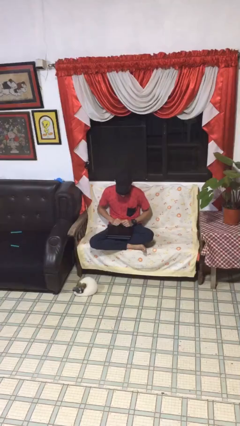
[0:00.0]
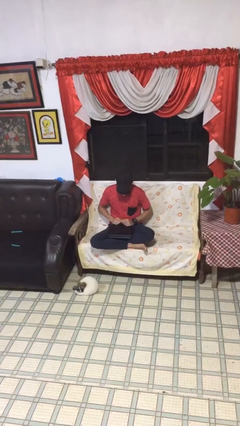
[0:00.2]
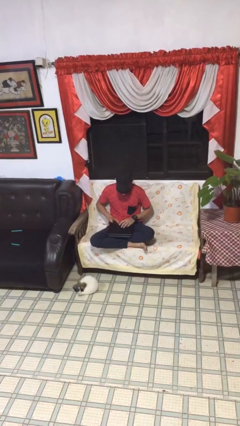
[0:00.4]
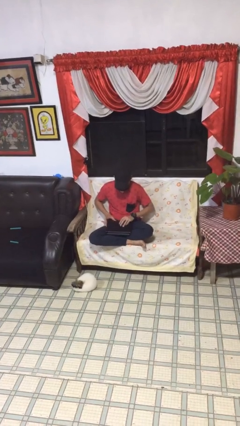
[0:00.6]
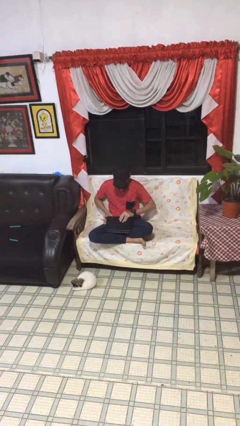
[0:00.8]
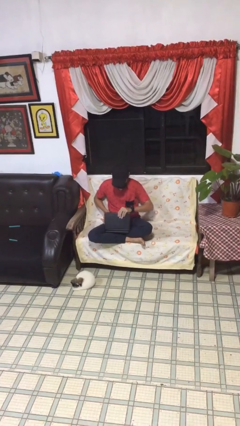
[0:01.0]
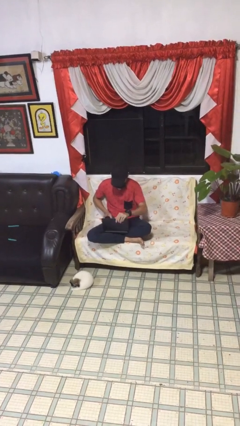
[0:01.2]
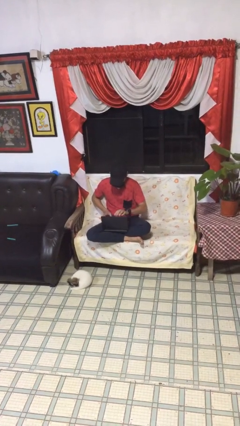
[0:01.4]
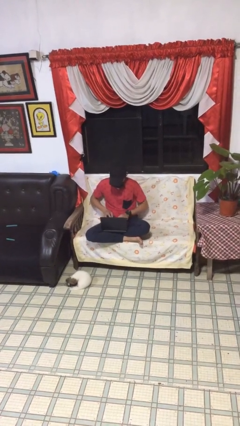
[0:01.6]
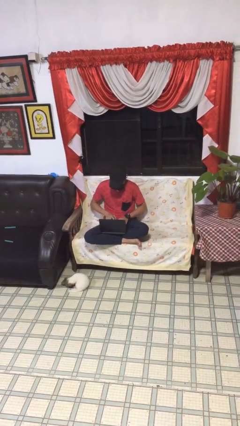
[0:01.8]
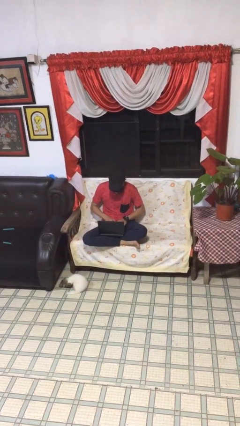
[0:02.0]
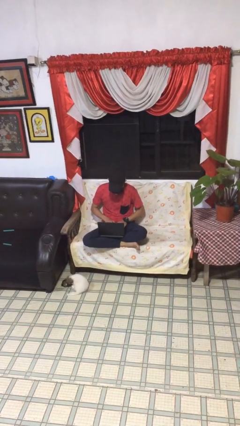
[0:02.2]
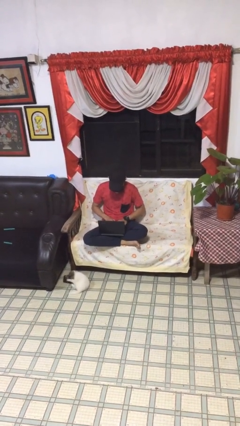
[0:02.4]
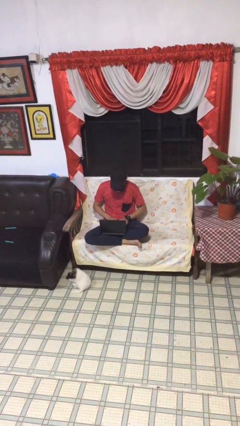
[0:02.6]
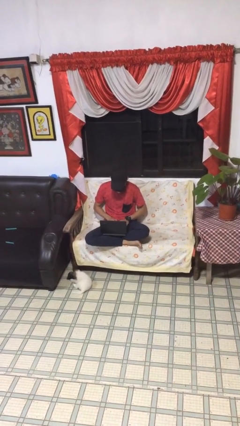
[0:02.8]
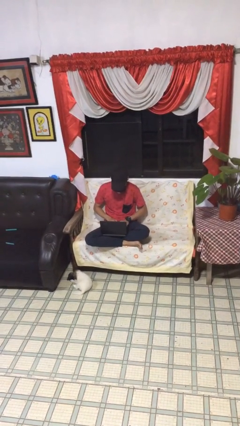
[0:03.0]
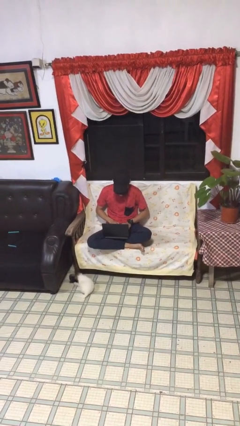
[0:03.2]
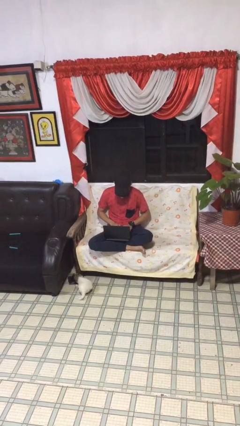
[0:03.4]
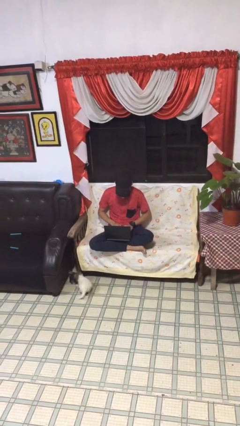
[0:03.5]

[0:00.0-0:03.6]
person interacts with laptop

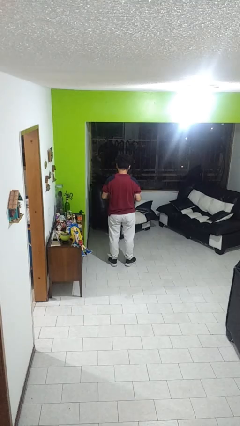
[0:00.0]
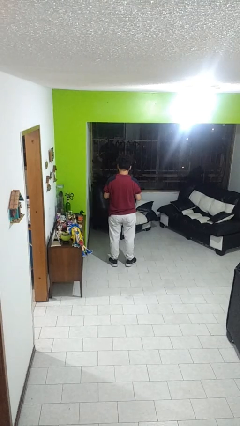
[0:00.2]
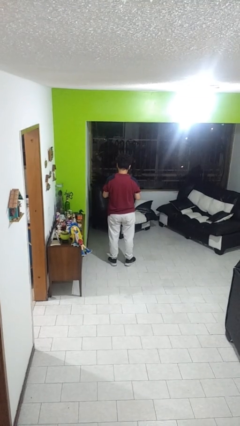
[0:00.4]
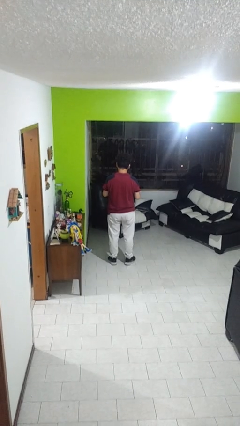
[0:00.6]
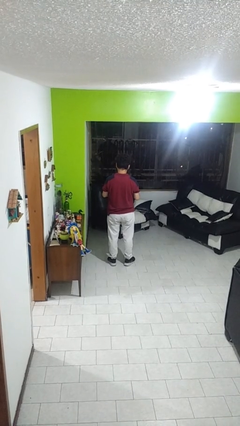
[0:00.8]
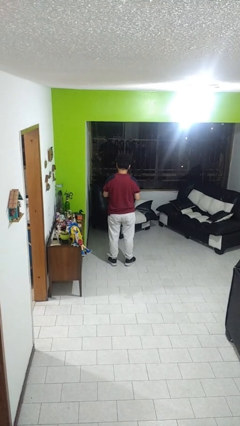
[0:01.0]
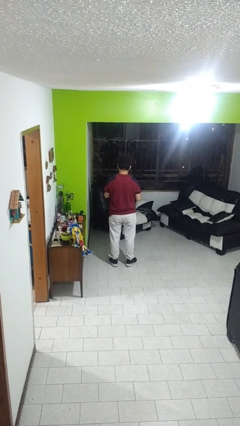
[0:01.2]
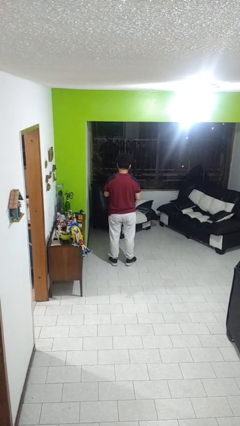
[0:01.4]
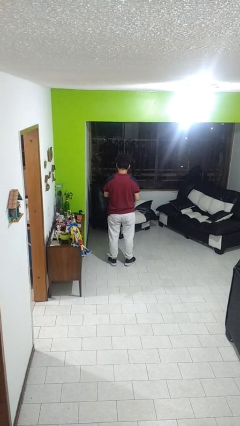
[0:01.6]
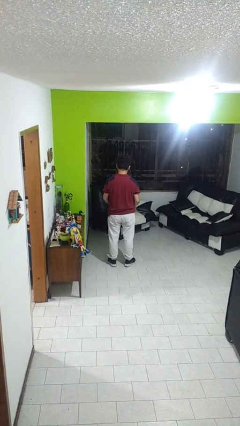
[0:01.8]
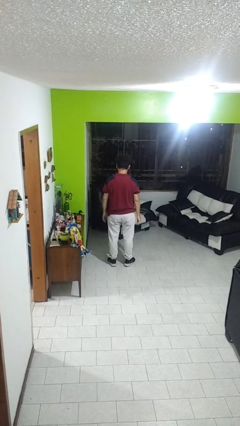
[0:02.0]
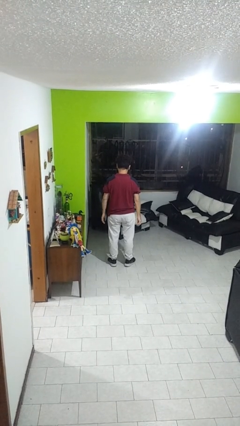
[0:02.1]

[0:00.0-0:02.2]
person cracks knuckles

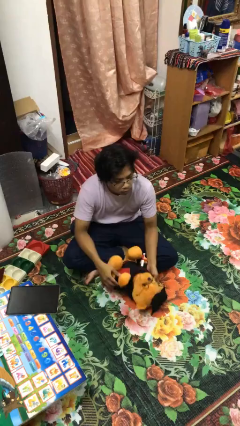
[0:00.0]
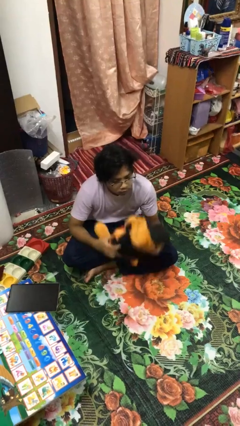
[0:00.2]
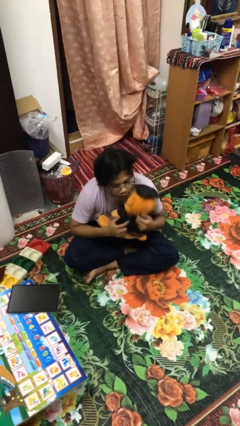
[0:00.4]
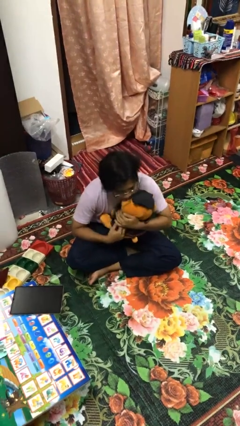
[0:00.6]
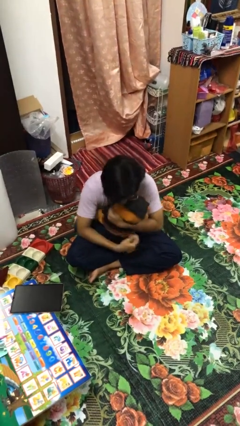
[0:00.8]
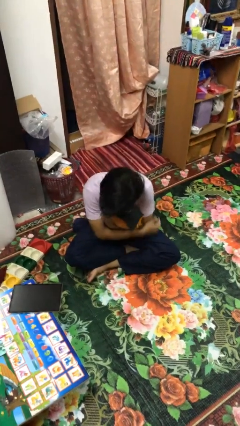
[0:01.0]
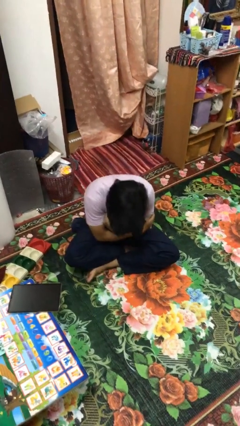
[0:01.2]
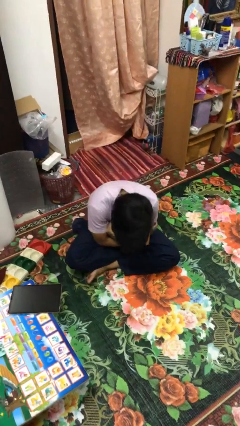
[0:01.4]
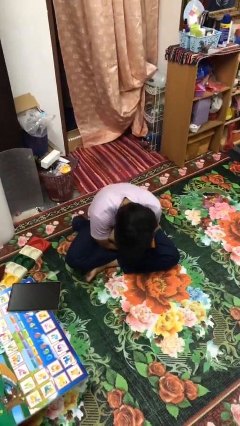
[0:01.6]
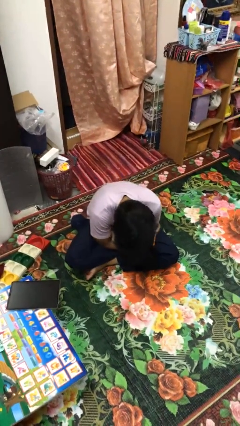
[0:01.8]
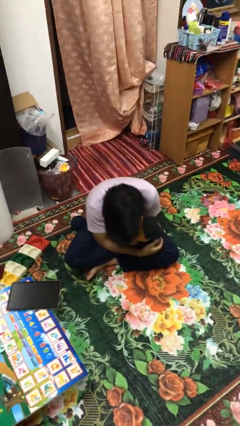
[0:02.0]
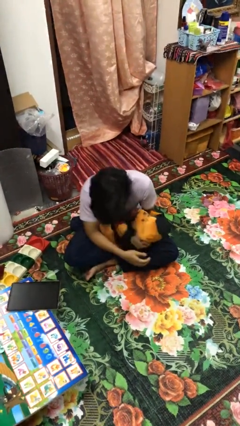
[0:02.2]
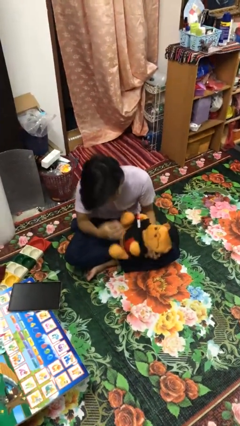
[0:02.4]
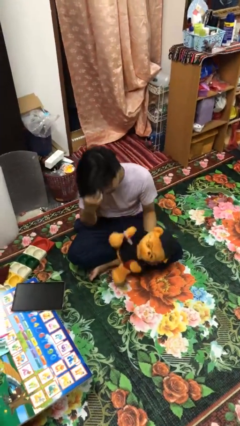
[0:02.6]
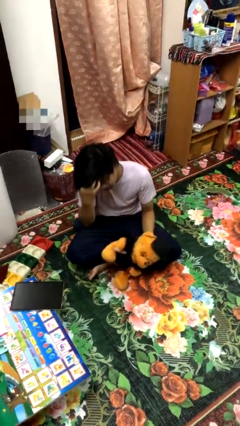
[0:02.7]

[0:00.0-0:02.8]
person hugs stuffed animal

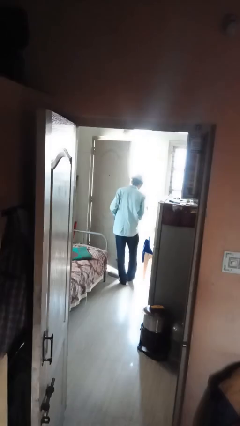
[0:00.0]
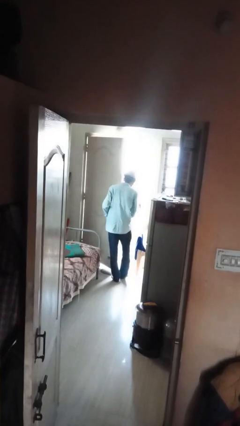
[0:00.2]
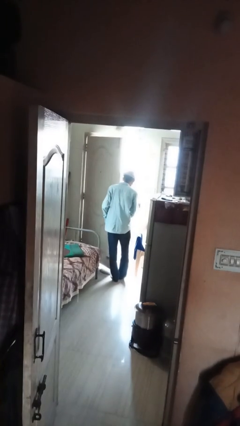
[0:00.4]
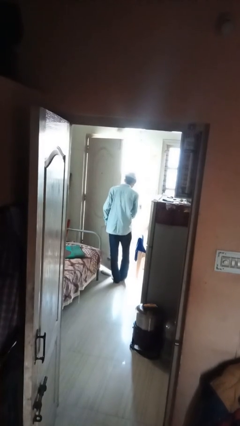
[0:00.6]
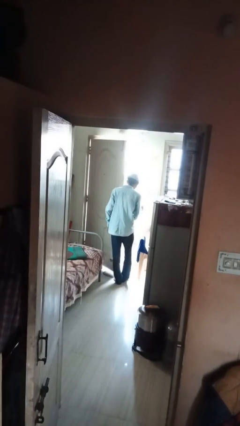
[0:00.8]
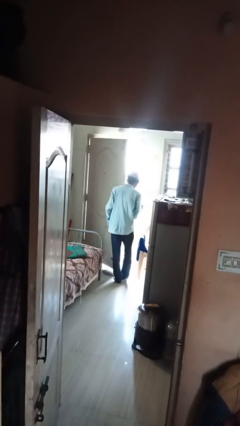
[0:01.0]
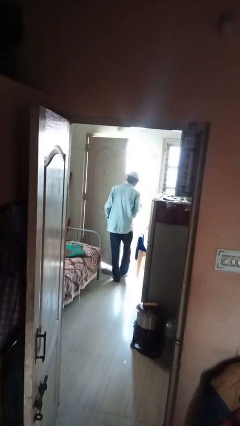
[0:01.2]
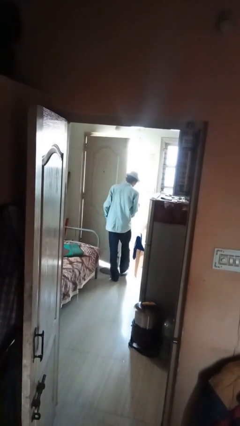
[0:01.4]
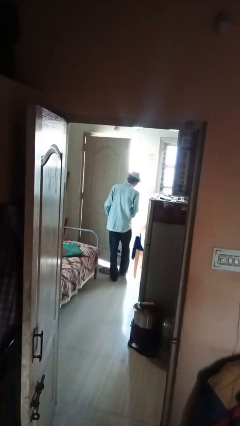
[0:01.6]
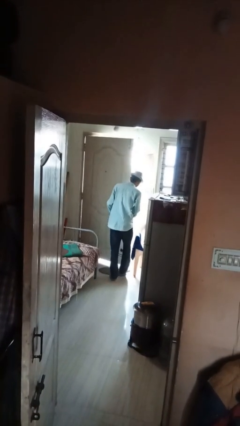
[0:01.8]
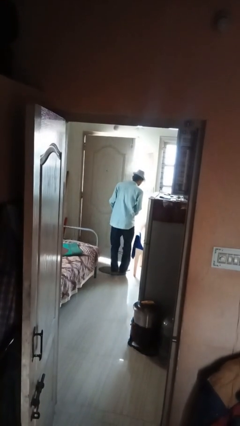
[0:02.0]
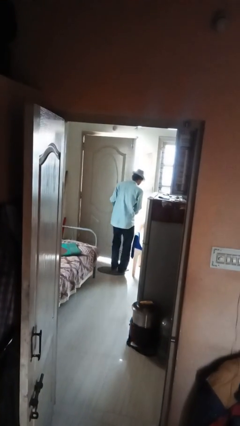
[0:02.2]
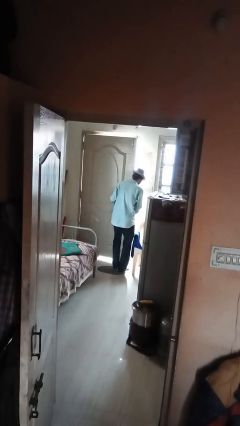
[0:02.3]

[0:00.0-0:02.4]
person opens facility door

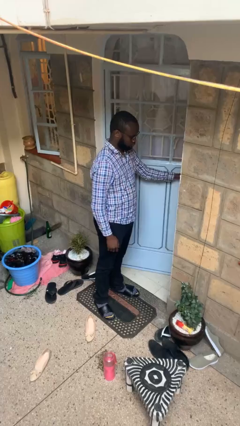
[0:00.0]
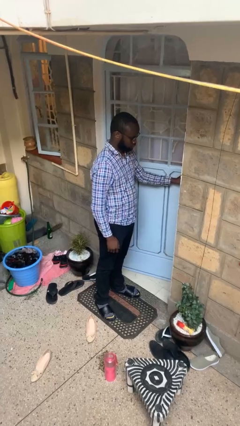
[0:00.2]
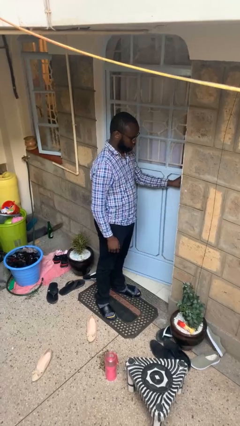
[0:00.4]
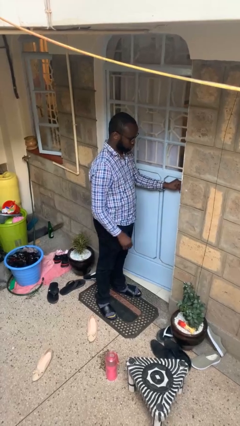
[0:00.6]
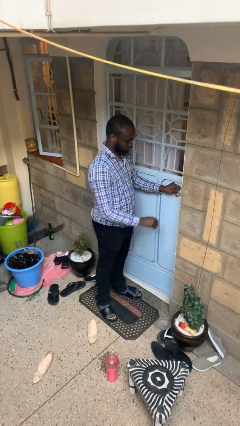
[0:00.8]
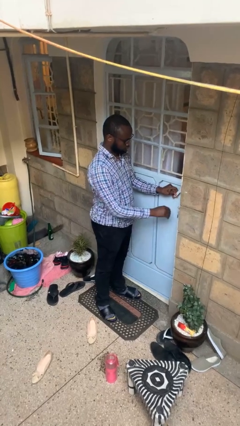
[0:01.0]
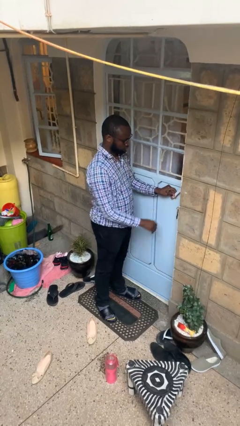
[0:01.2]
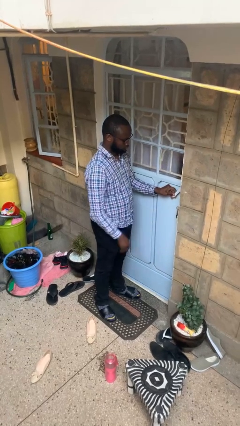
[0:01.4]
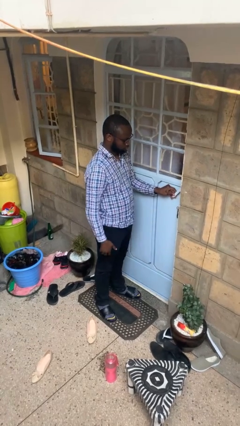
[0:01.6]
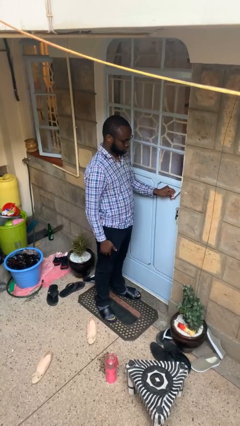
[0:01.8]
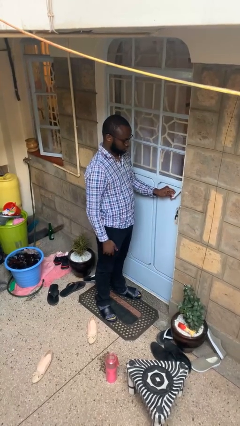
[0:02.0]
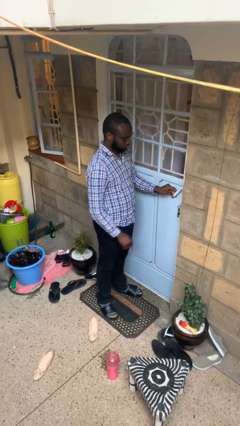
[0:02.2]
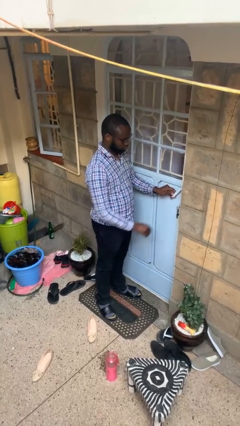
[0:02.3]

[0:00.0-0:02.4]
person closes facility door

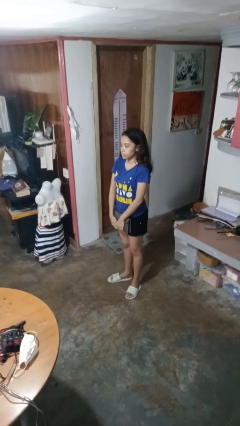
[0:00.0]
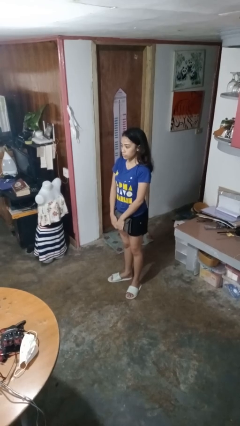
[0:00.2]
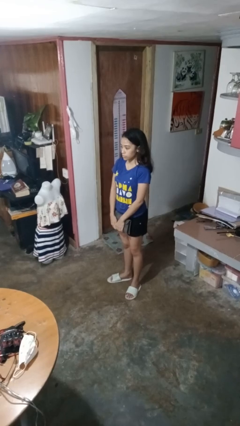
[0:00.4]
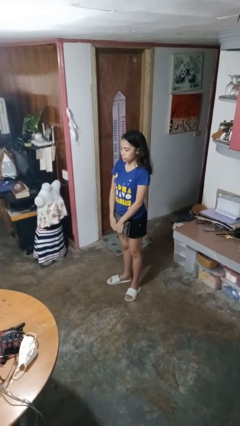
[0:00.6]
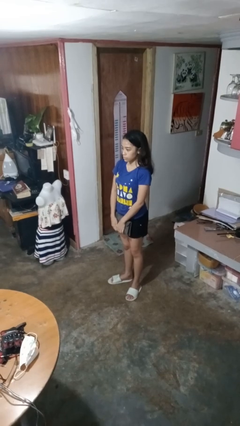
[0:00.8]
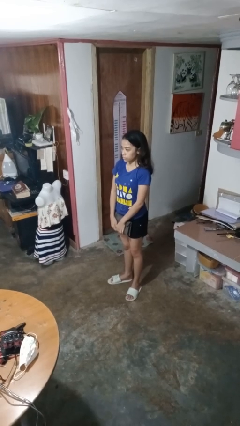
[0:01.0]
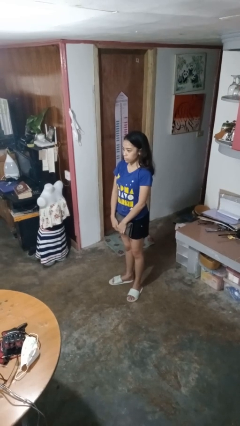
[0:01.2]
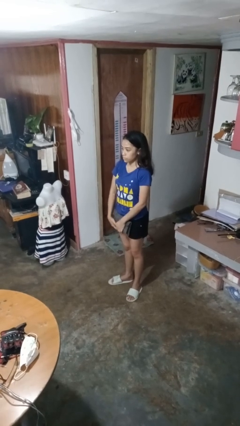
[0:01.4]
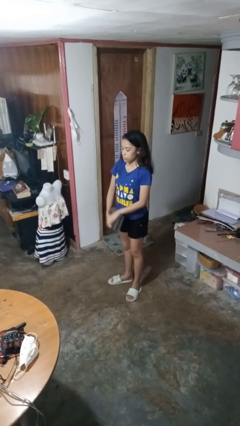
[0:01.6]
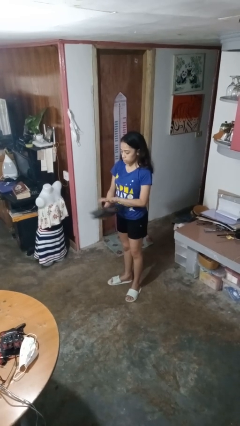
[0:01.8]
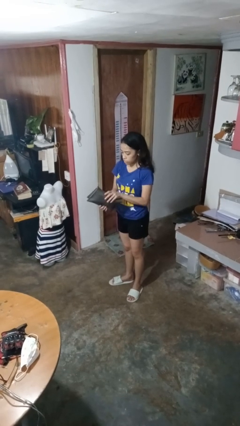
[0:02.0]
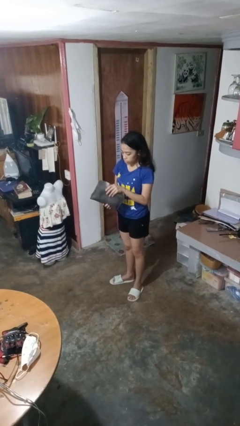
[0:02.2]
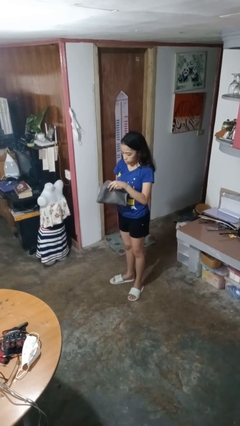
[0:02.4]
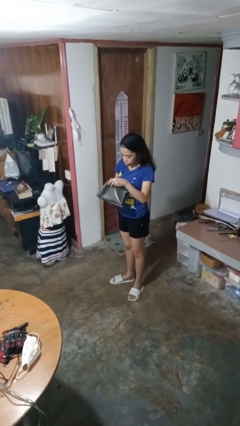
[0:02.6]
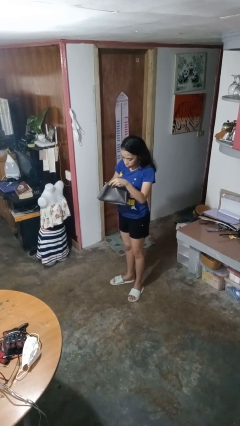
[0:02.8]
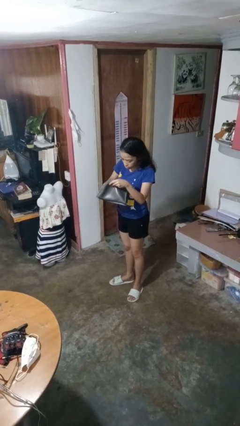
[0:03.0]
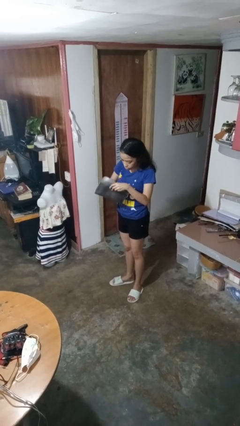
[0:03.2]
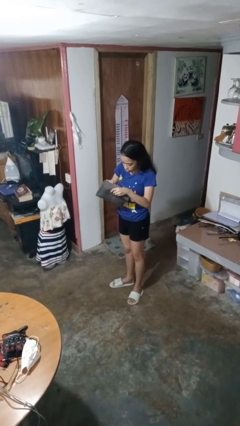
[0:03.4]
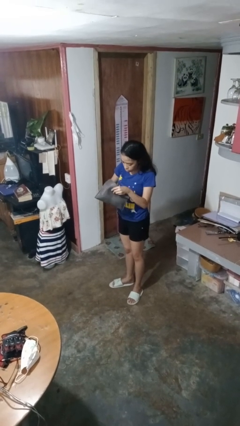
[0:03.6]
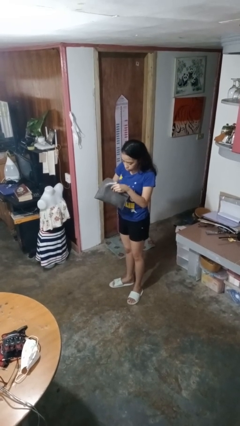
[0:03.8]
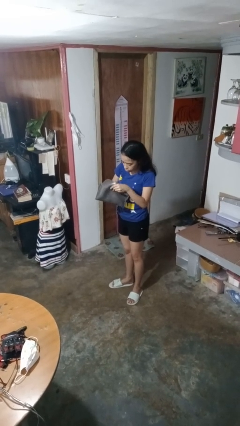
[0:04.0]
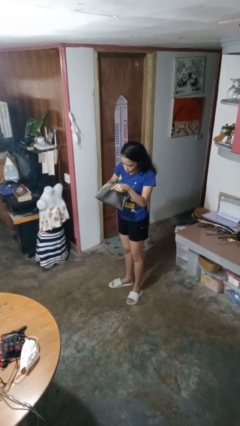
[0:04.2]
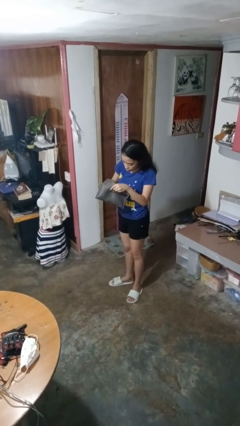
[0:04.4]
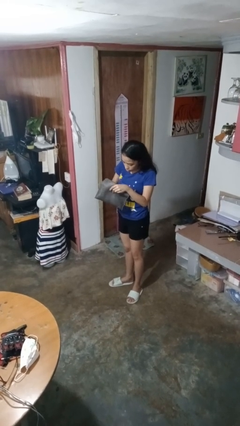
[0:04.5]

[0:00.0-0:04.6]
person searches in purse
